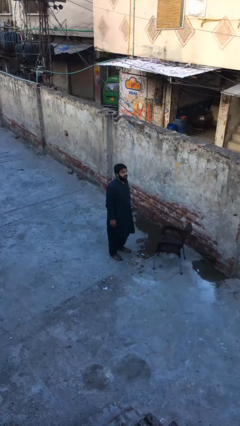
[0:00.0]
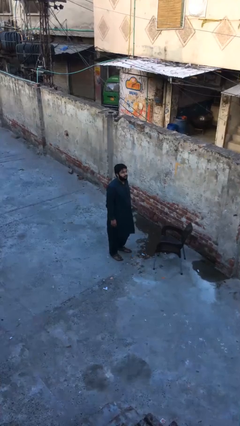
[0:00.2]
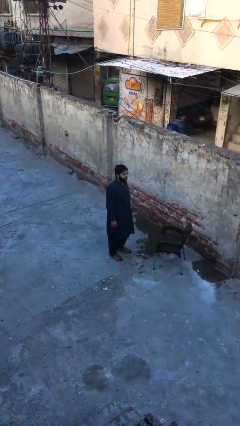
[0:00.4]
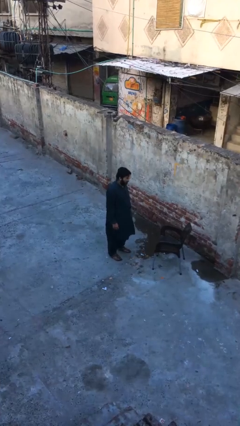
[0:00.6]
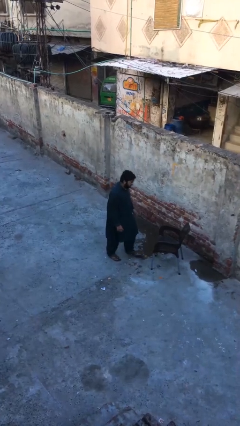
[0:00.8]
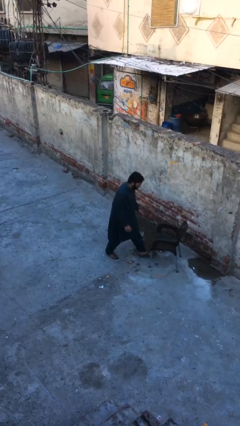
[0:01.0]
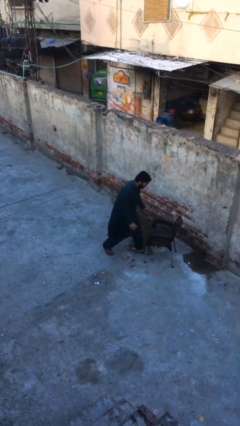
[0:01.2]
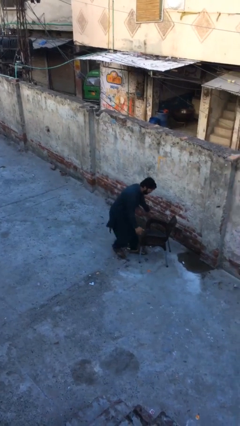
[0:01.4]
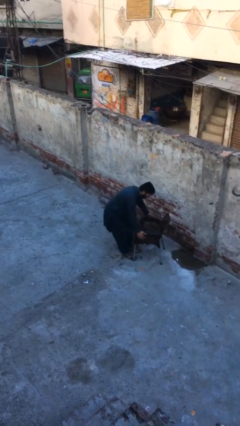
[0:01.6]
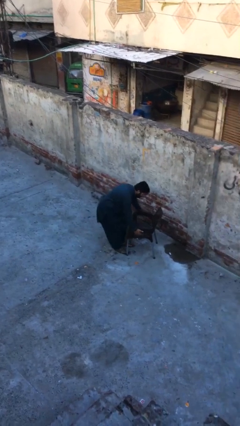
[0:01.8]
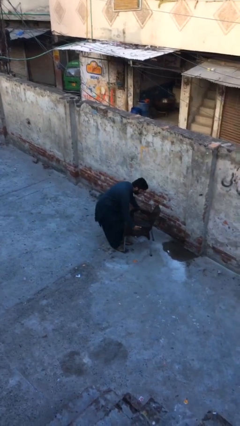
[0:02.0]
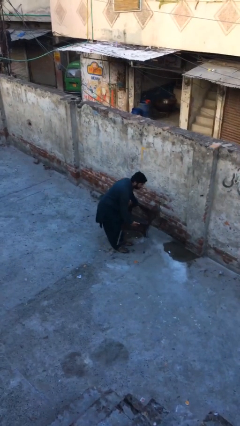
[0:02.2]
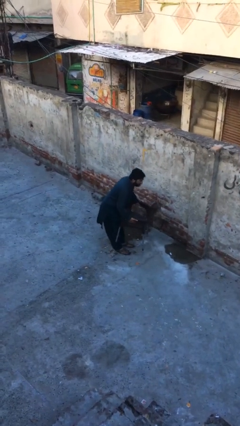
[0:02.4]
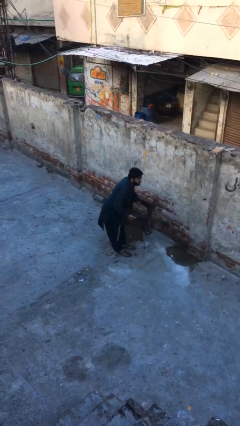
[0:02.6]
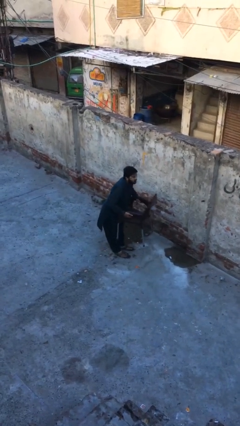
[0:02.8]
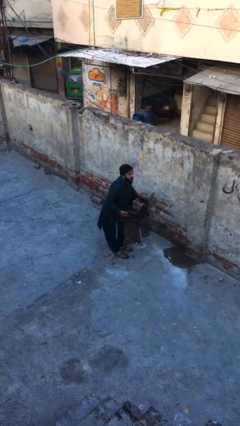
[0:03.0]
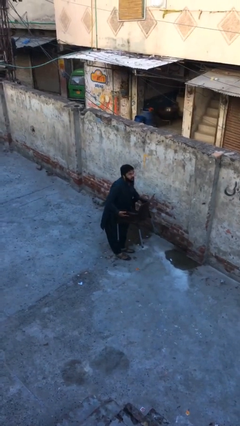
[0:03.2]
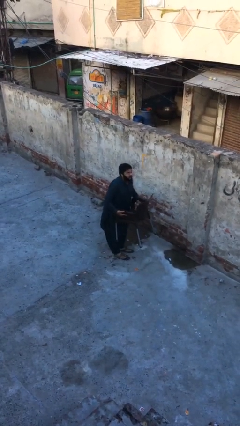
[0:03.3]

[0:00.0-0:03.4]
person picks up object from floor

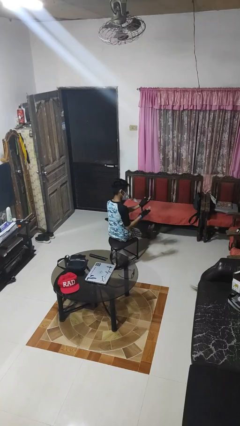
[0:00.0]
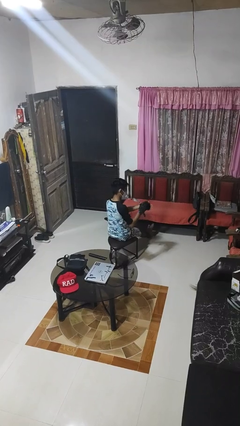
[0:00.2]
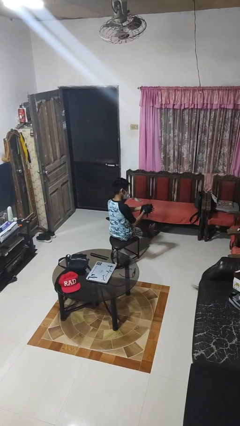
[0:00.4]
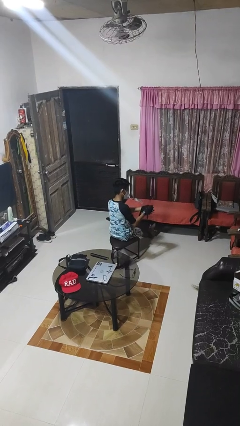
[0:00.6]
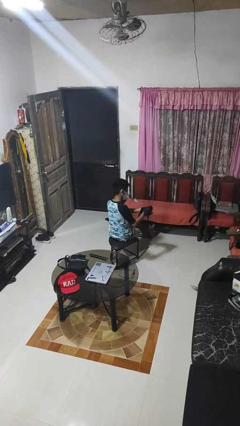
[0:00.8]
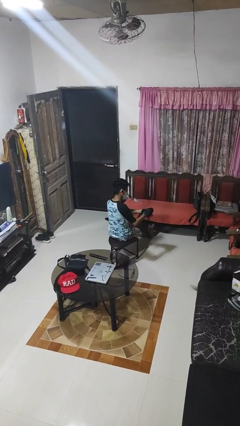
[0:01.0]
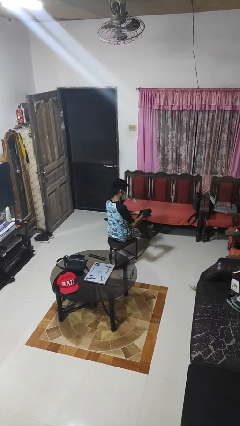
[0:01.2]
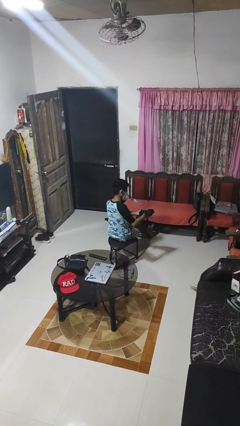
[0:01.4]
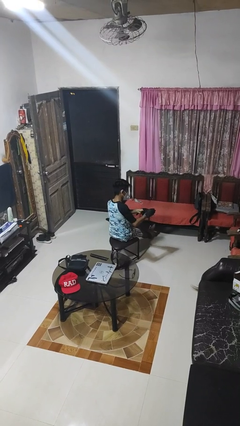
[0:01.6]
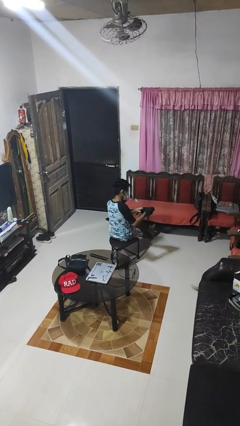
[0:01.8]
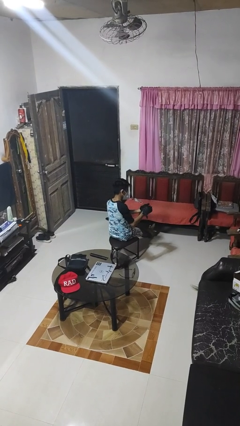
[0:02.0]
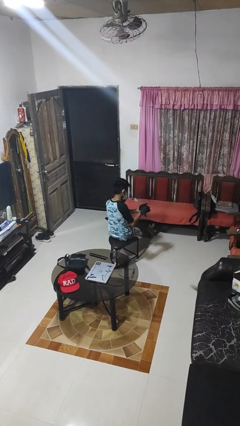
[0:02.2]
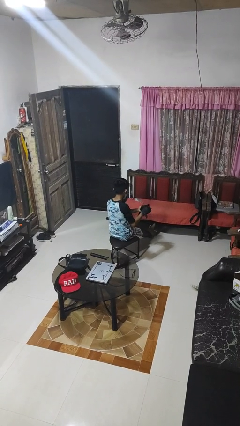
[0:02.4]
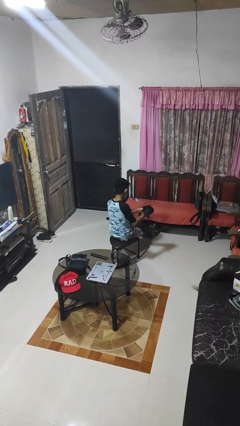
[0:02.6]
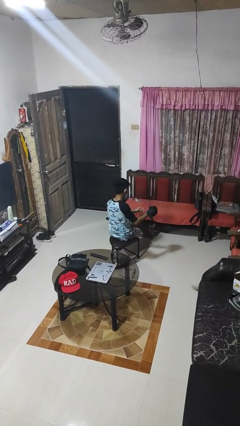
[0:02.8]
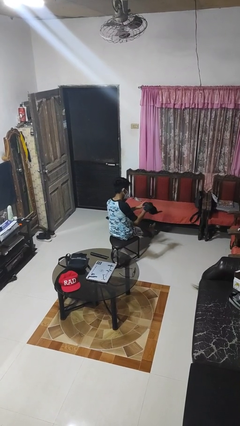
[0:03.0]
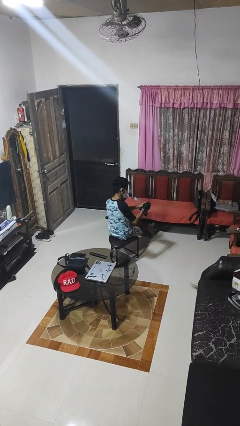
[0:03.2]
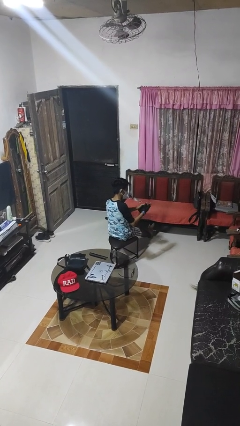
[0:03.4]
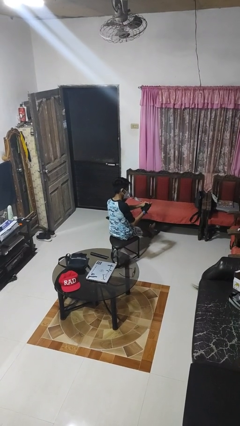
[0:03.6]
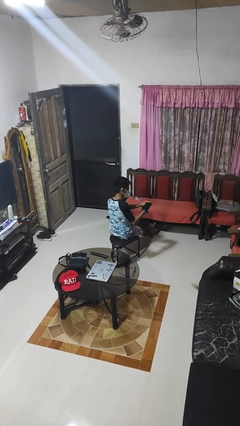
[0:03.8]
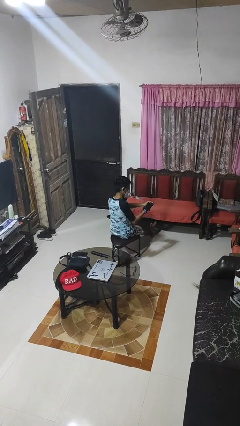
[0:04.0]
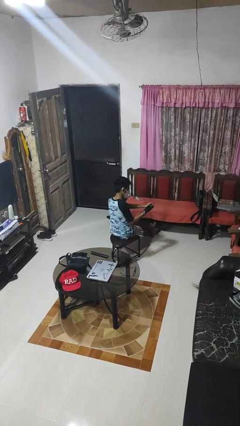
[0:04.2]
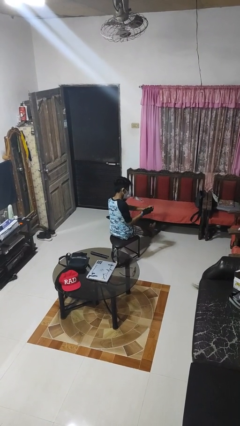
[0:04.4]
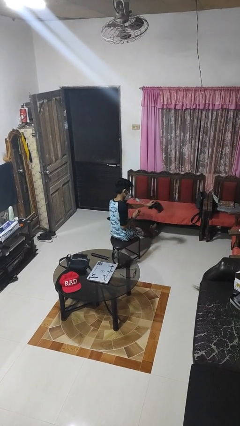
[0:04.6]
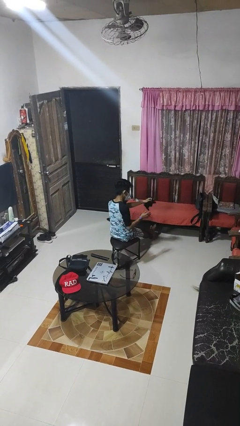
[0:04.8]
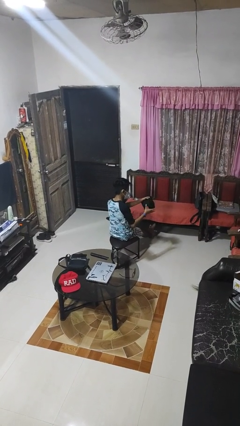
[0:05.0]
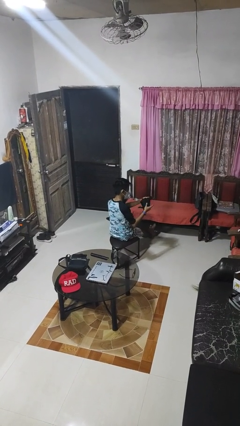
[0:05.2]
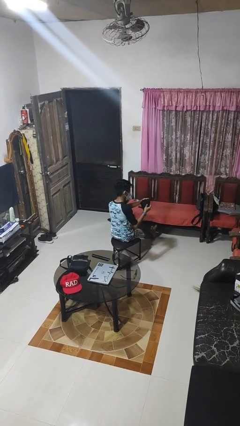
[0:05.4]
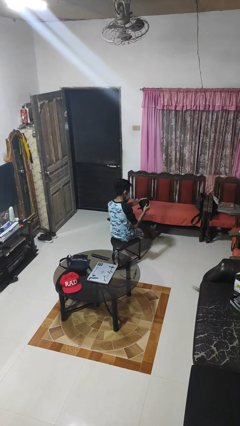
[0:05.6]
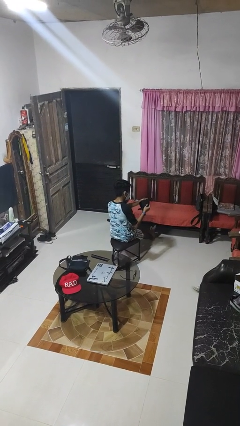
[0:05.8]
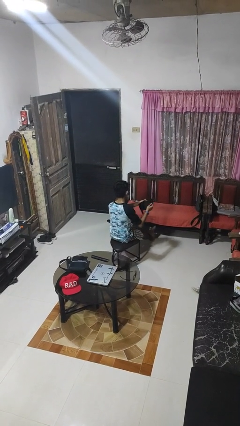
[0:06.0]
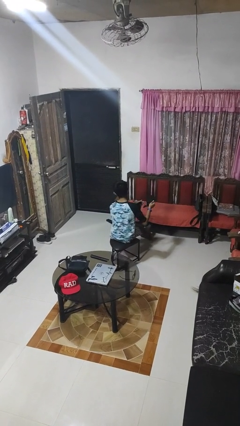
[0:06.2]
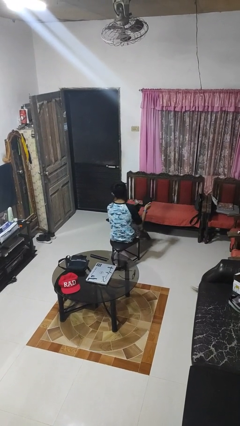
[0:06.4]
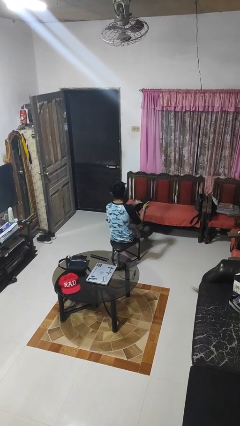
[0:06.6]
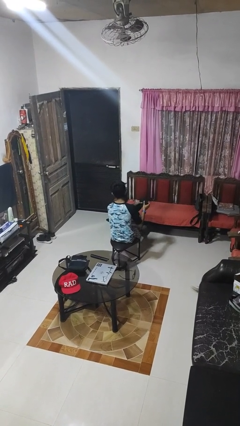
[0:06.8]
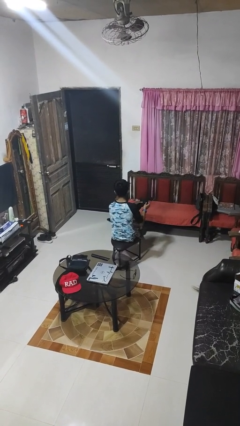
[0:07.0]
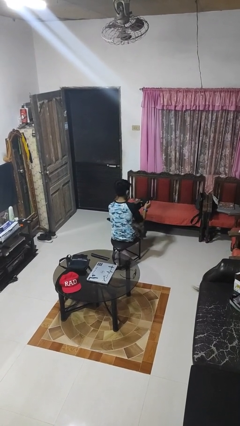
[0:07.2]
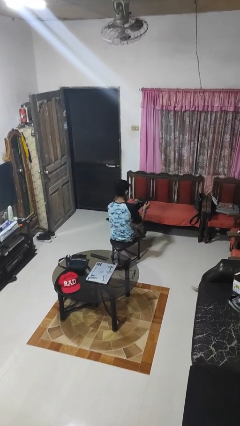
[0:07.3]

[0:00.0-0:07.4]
person takes off gloves

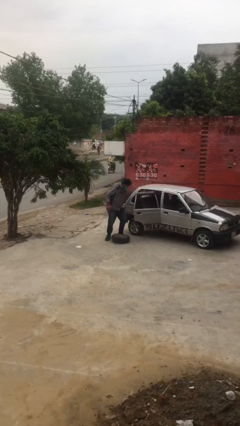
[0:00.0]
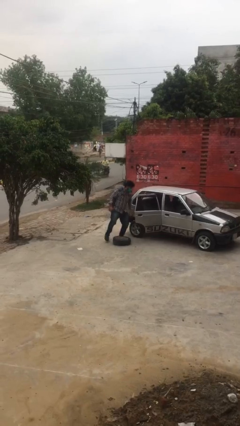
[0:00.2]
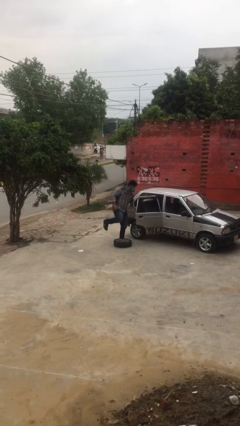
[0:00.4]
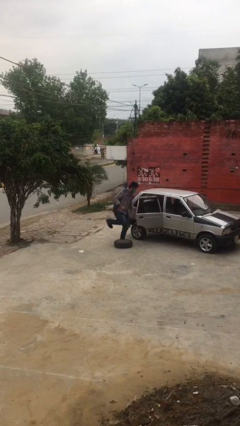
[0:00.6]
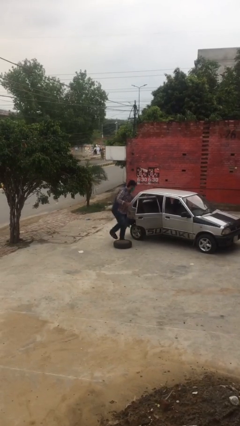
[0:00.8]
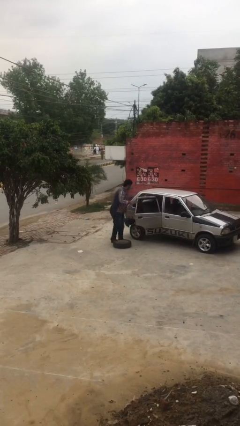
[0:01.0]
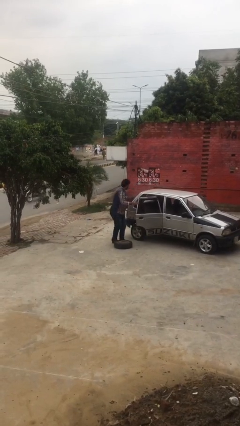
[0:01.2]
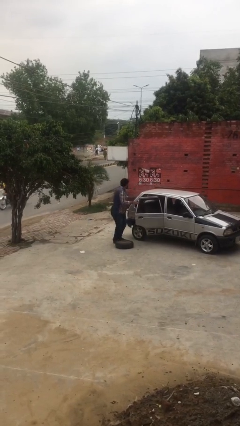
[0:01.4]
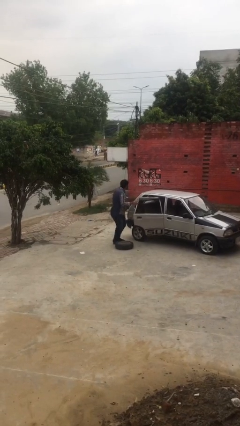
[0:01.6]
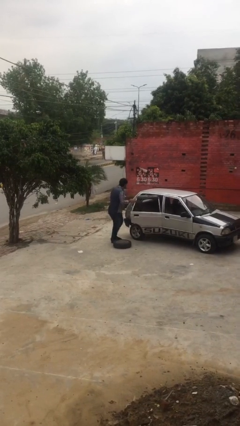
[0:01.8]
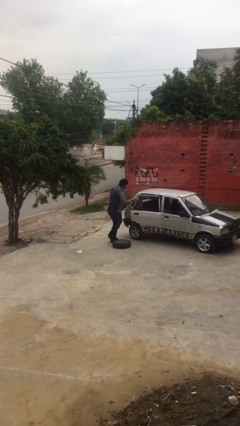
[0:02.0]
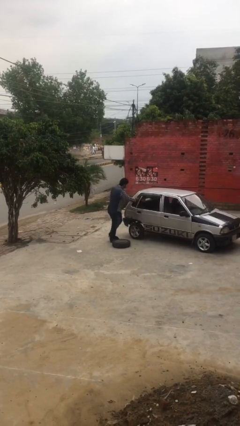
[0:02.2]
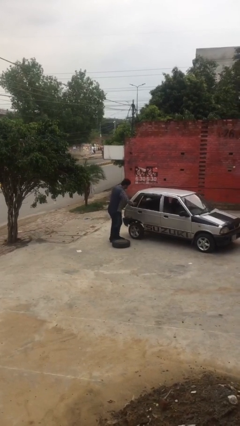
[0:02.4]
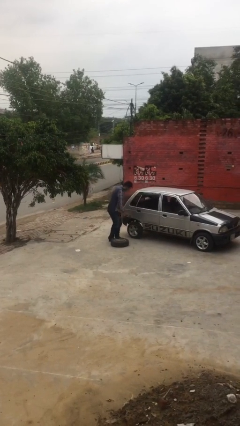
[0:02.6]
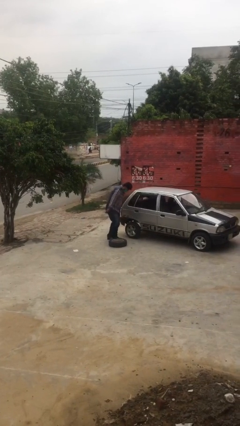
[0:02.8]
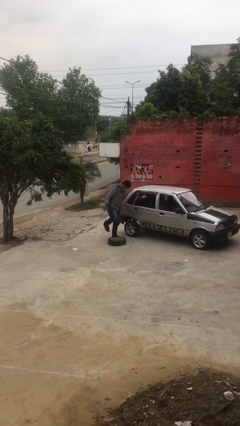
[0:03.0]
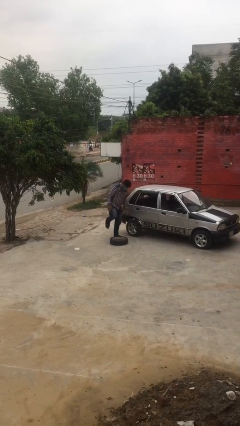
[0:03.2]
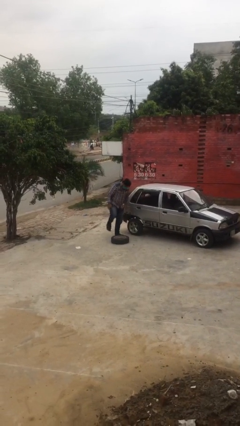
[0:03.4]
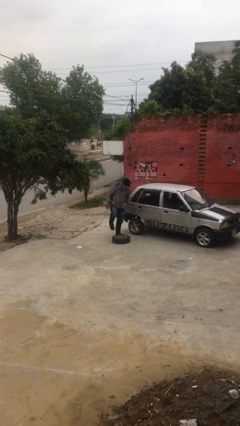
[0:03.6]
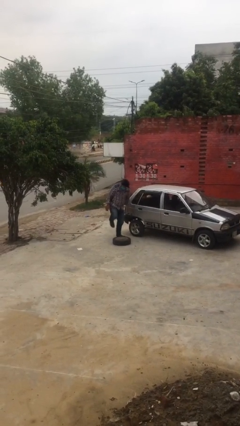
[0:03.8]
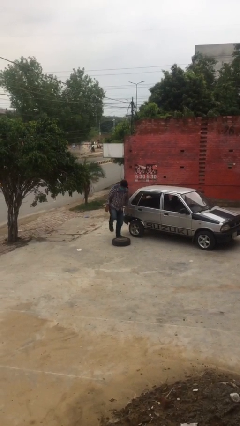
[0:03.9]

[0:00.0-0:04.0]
person closes car door

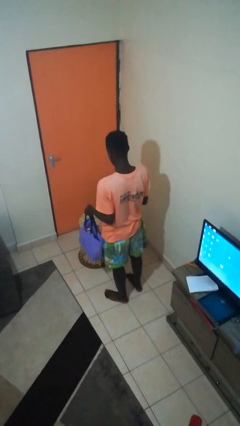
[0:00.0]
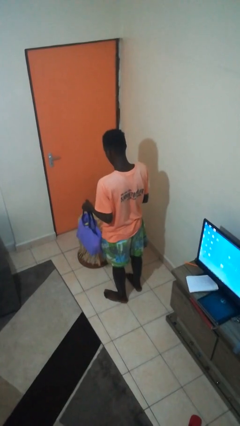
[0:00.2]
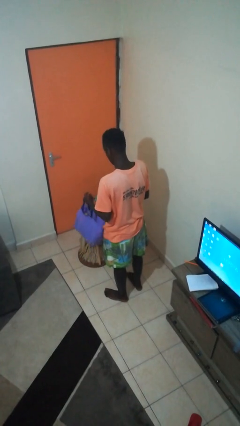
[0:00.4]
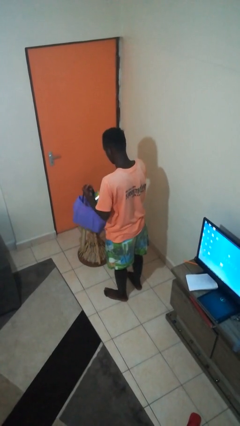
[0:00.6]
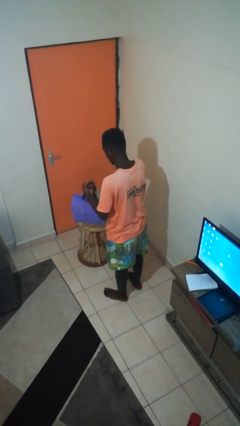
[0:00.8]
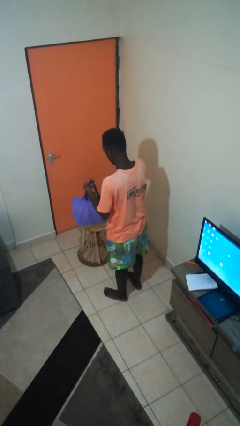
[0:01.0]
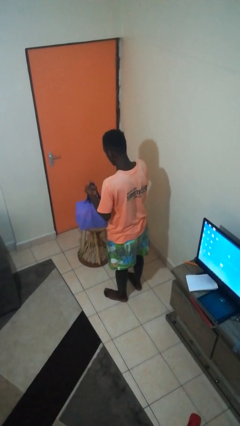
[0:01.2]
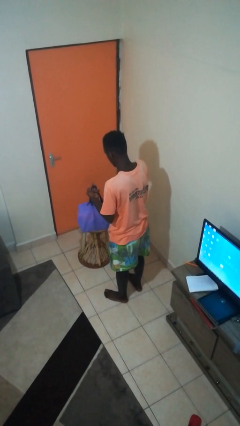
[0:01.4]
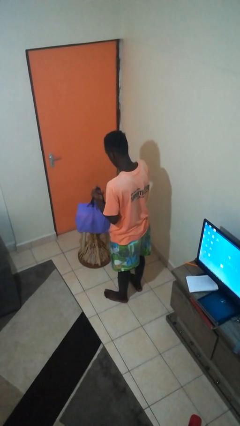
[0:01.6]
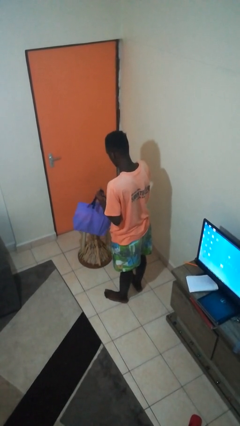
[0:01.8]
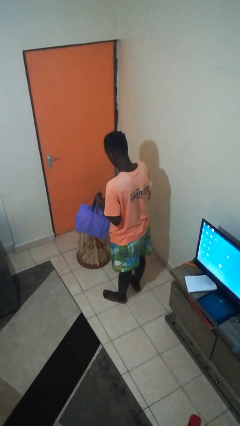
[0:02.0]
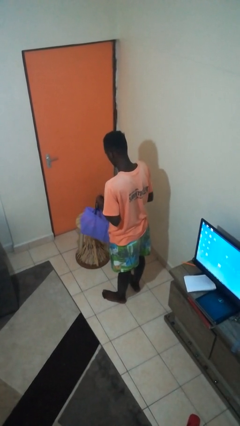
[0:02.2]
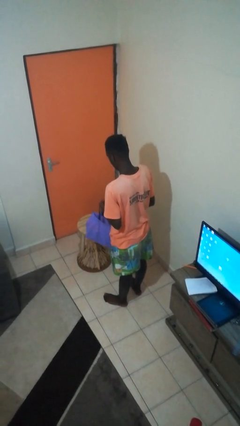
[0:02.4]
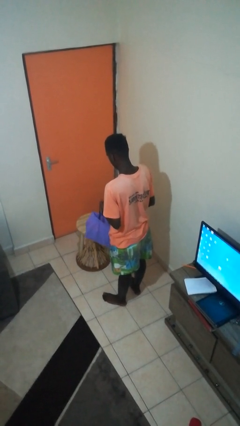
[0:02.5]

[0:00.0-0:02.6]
person puts object into bag

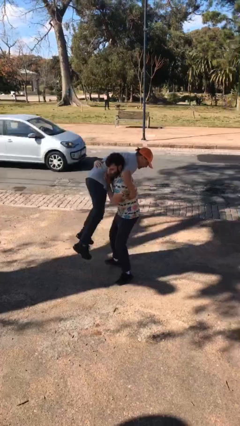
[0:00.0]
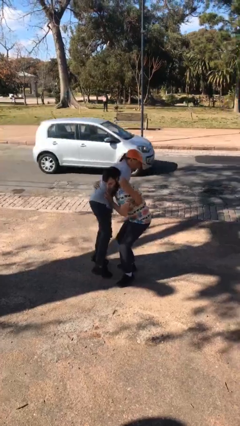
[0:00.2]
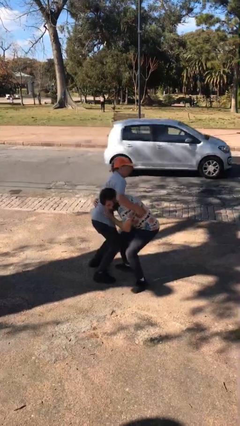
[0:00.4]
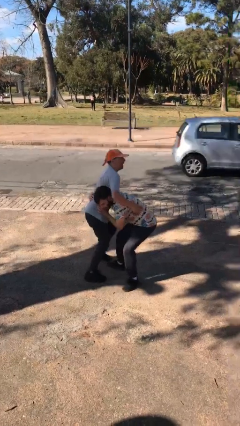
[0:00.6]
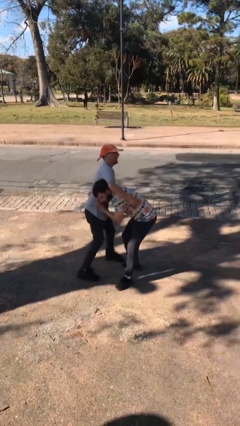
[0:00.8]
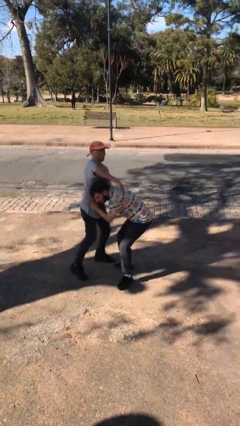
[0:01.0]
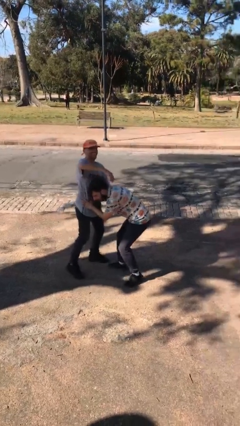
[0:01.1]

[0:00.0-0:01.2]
person puts down person
